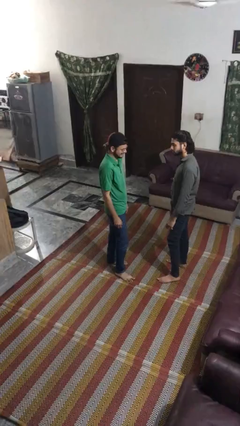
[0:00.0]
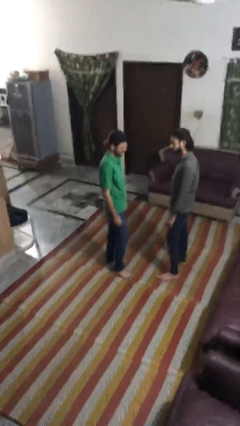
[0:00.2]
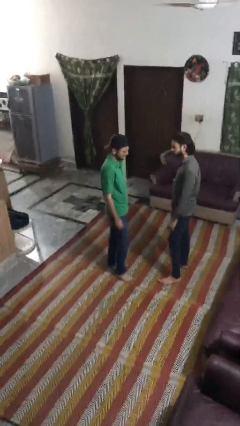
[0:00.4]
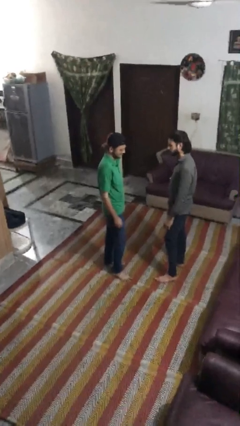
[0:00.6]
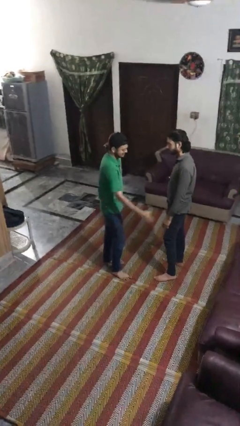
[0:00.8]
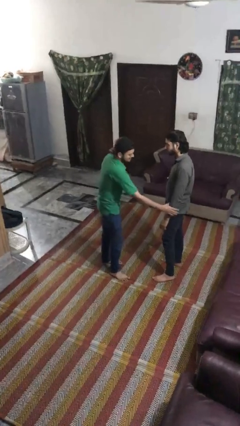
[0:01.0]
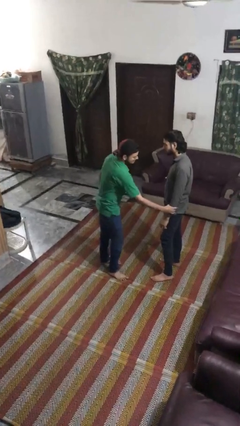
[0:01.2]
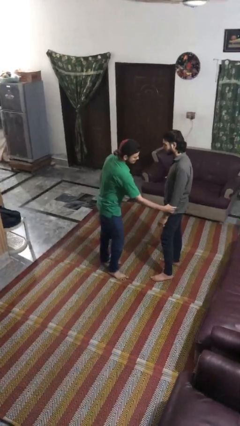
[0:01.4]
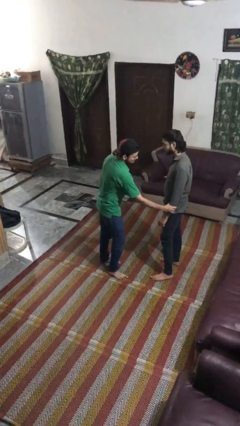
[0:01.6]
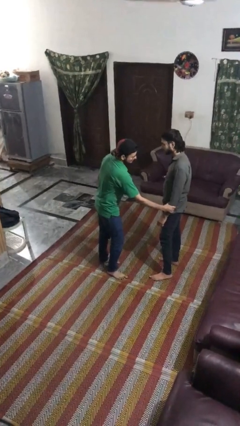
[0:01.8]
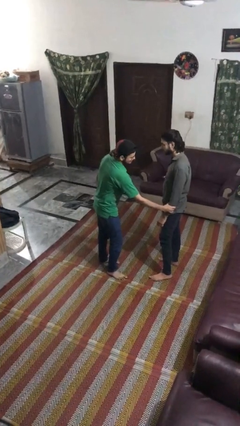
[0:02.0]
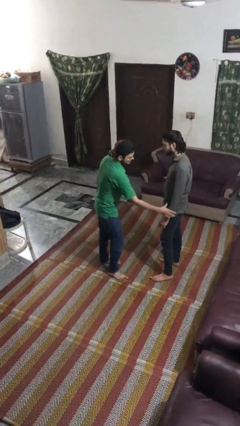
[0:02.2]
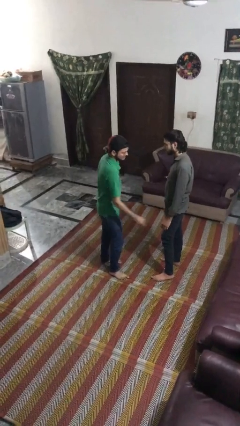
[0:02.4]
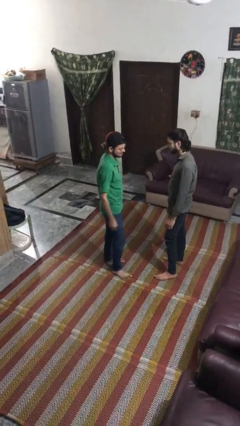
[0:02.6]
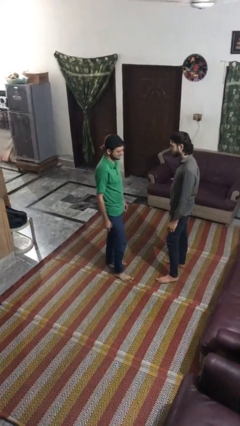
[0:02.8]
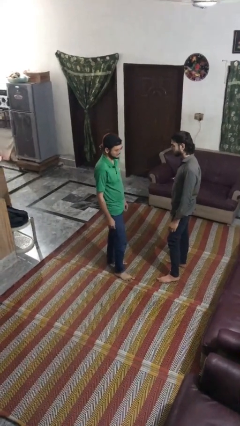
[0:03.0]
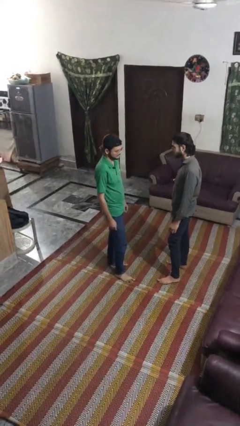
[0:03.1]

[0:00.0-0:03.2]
person grabs person by forearm

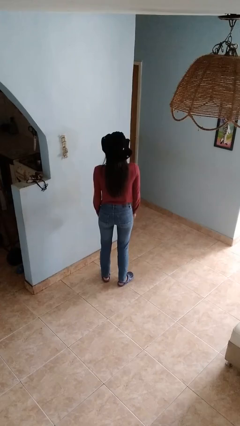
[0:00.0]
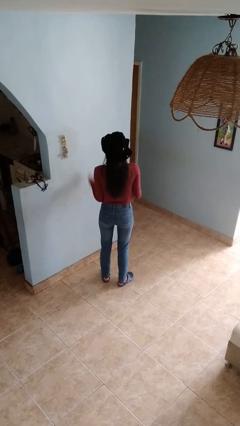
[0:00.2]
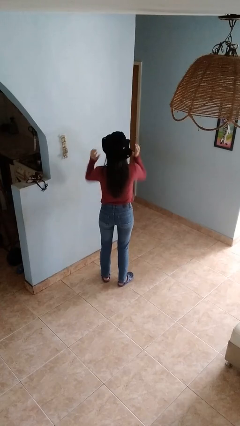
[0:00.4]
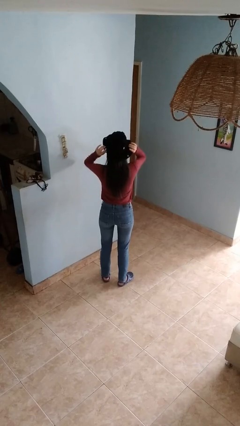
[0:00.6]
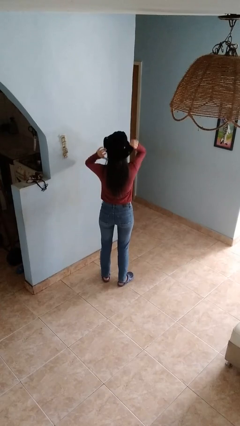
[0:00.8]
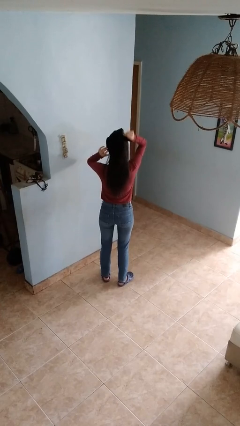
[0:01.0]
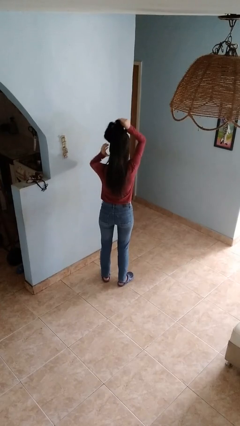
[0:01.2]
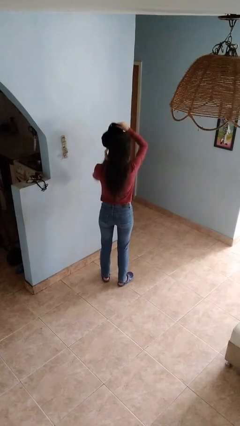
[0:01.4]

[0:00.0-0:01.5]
person takes off hat

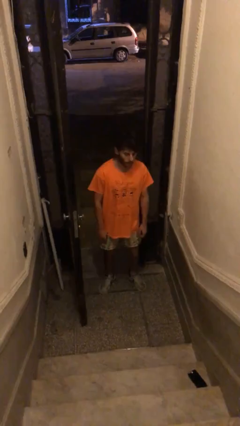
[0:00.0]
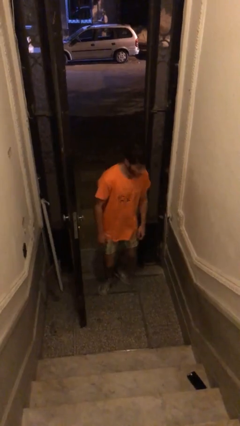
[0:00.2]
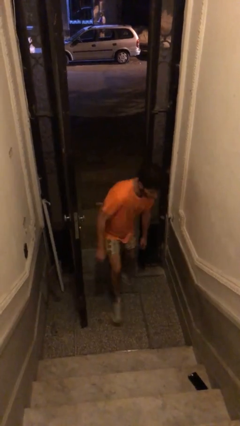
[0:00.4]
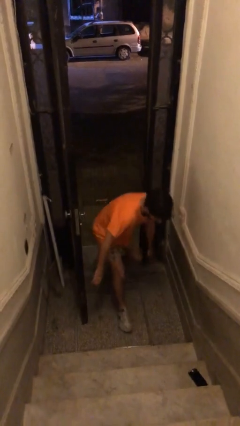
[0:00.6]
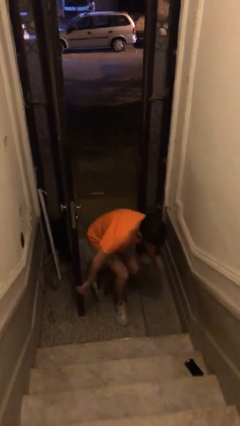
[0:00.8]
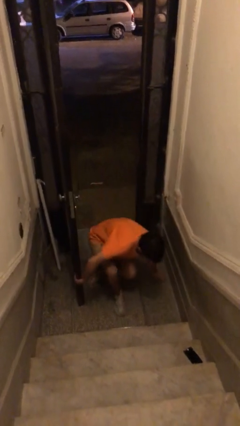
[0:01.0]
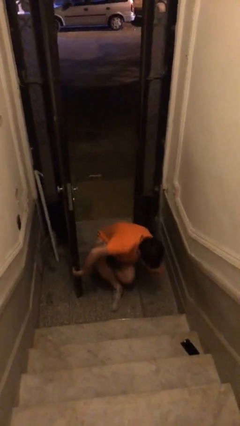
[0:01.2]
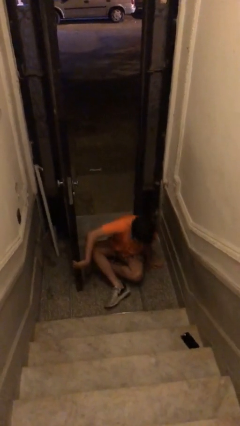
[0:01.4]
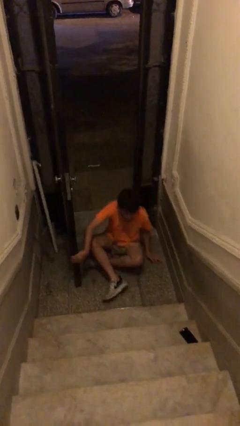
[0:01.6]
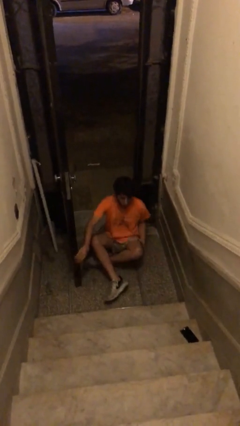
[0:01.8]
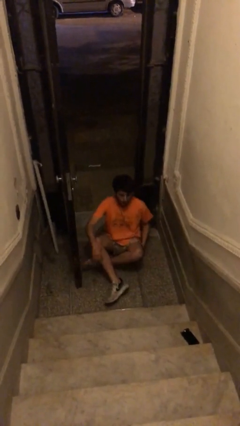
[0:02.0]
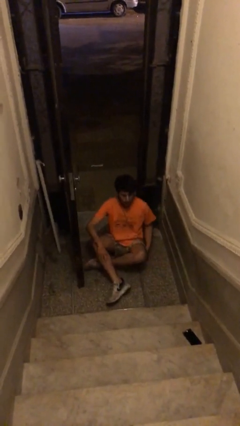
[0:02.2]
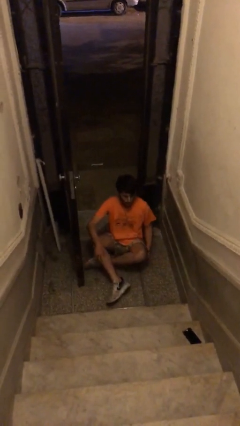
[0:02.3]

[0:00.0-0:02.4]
person sits down

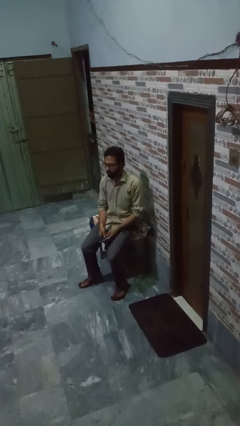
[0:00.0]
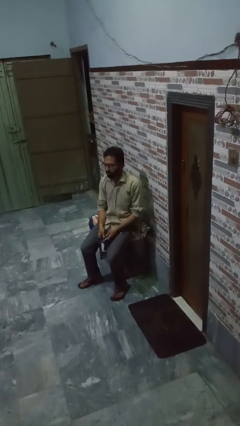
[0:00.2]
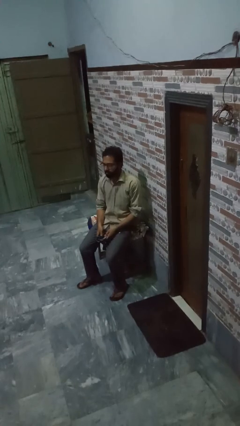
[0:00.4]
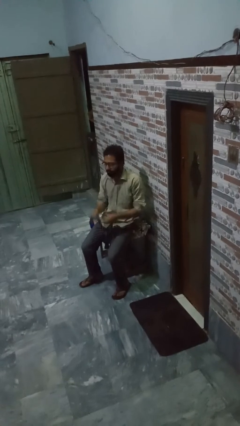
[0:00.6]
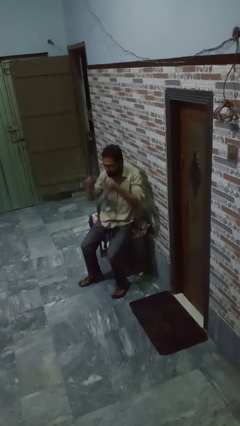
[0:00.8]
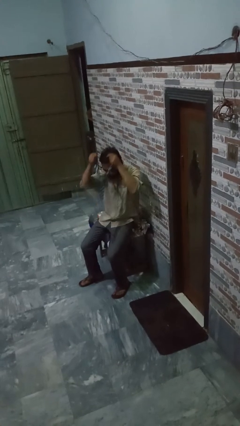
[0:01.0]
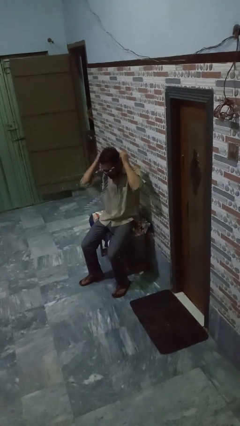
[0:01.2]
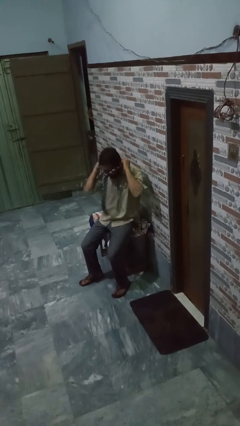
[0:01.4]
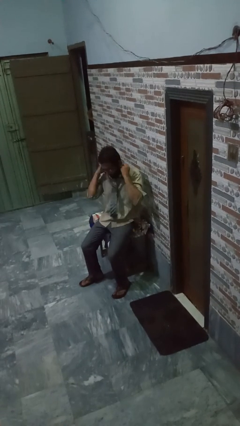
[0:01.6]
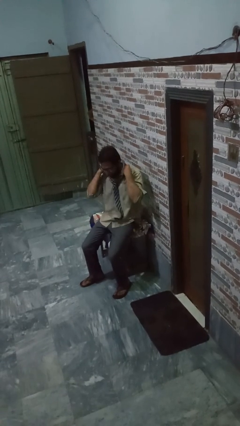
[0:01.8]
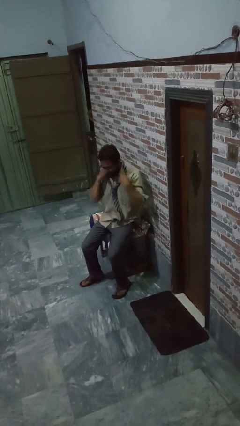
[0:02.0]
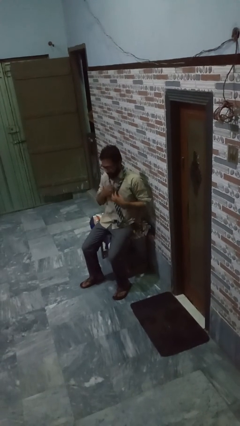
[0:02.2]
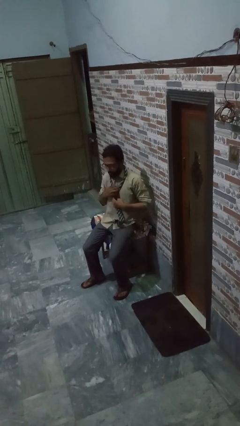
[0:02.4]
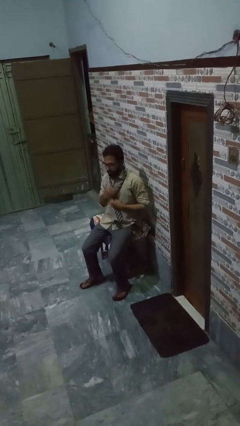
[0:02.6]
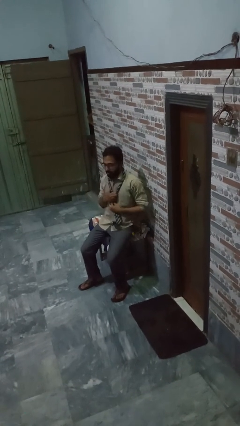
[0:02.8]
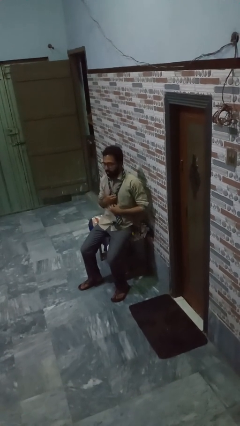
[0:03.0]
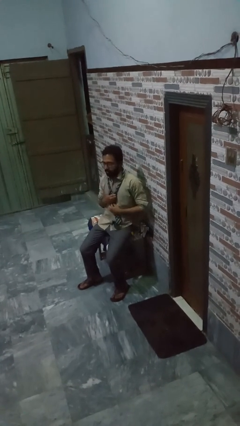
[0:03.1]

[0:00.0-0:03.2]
person puts on necktie

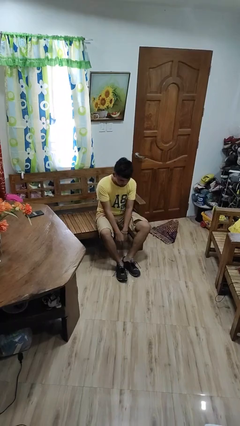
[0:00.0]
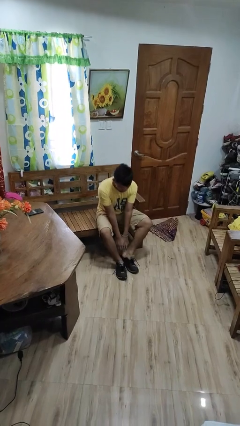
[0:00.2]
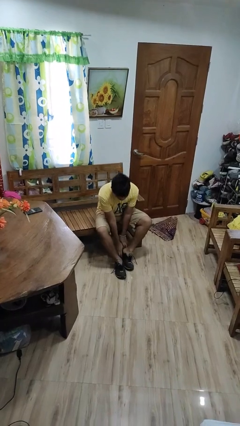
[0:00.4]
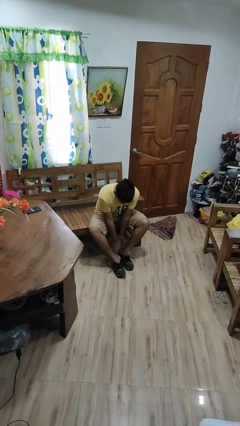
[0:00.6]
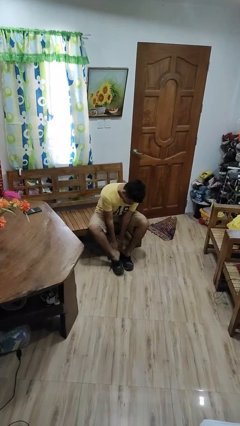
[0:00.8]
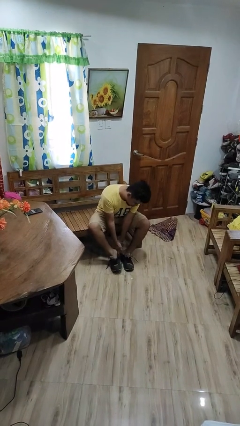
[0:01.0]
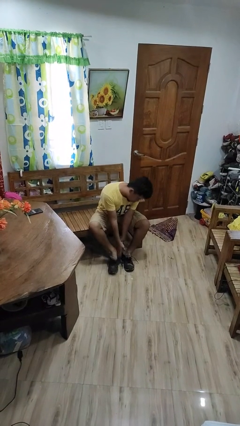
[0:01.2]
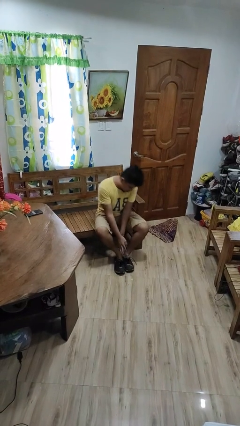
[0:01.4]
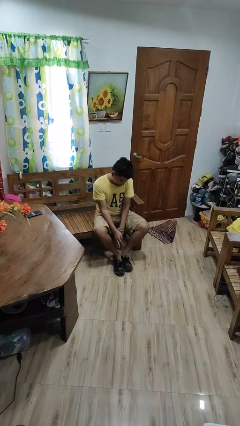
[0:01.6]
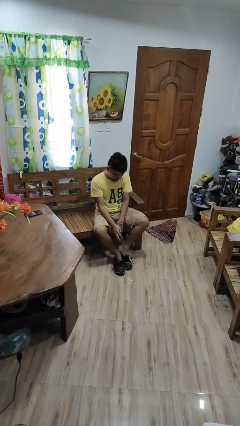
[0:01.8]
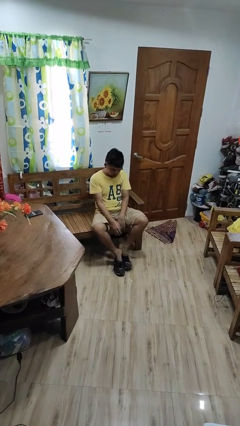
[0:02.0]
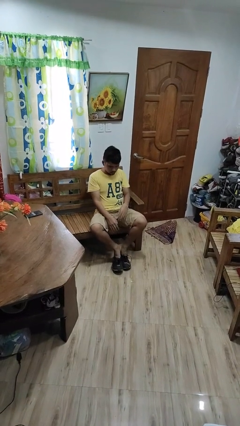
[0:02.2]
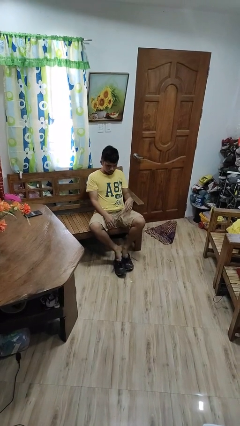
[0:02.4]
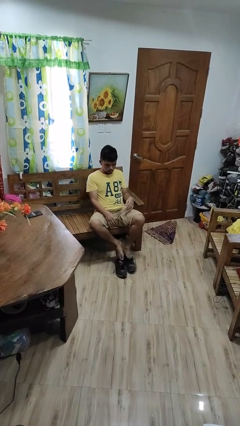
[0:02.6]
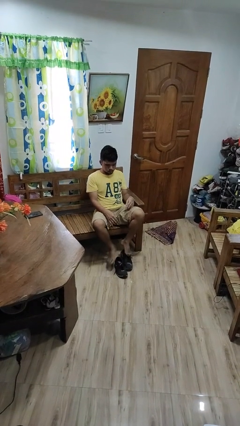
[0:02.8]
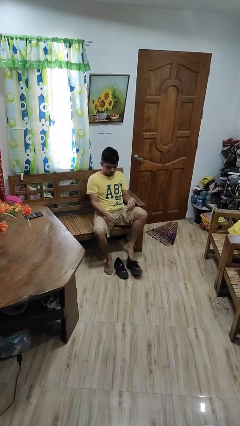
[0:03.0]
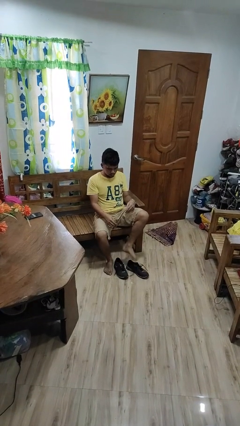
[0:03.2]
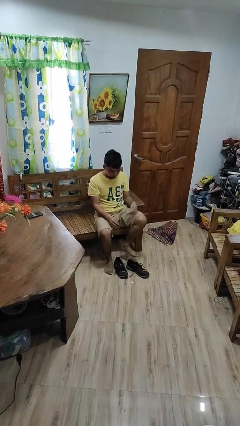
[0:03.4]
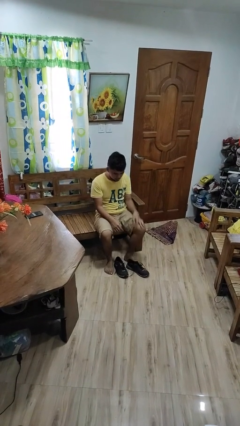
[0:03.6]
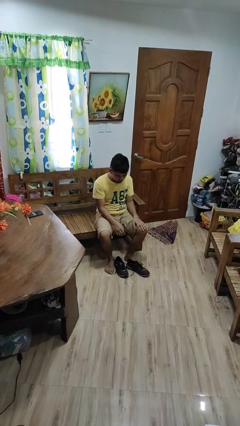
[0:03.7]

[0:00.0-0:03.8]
person takes off shoes

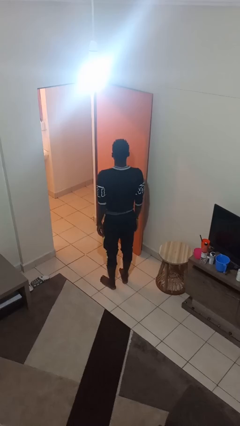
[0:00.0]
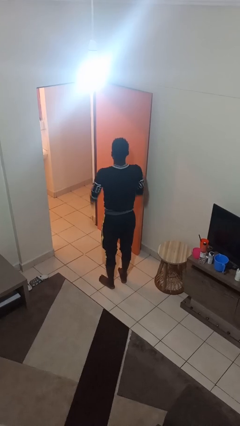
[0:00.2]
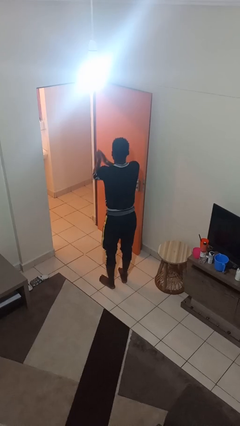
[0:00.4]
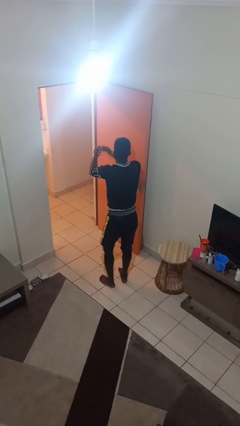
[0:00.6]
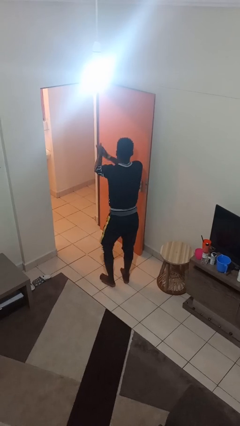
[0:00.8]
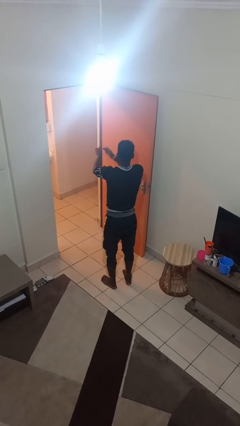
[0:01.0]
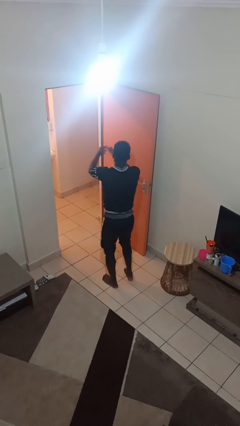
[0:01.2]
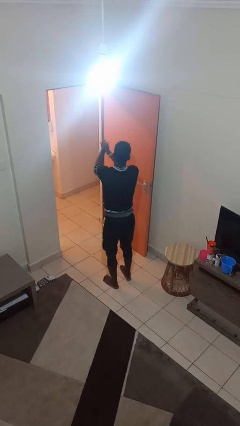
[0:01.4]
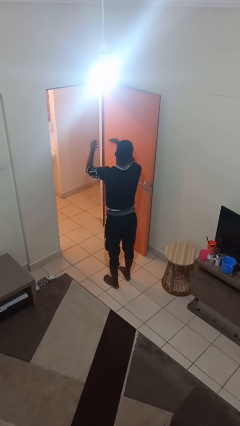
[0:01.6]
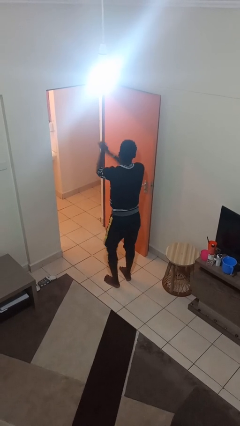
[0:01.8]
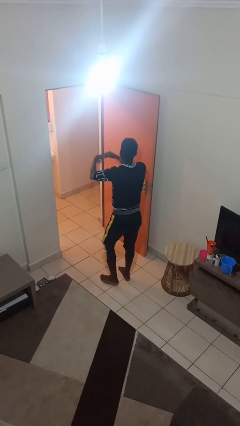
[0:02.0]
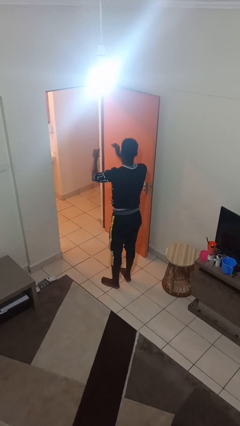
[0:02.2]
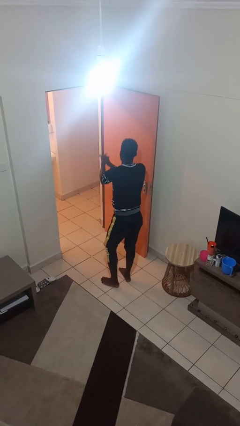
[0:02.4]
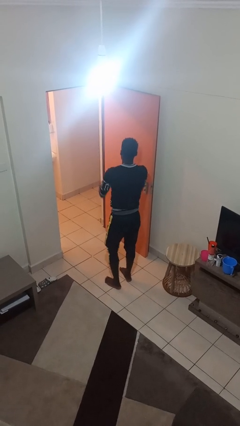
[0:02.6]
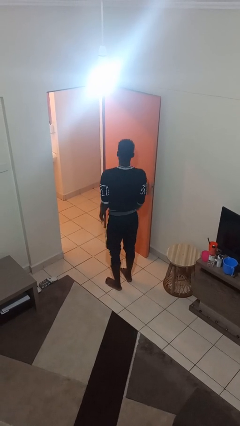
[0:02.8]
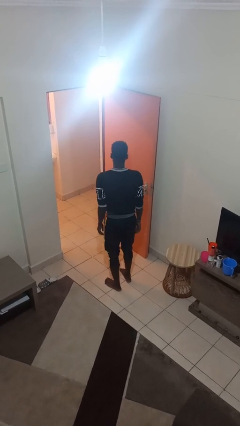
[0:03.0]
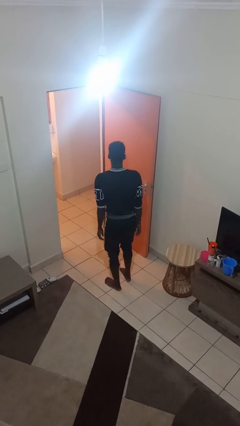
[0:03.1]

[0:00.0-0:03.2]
person claps hands

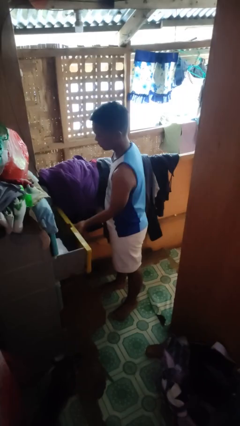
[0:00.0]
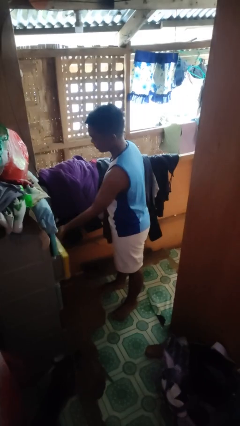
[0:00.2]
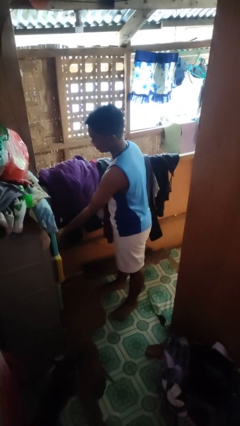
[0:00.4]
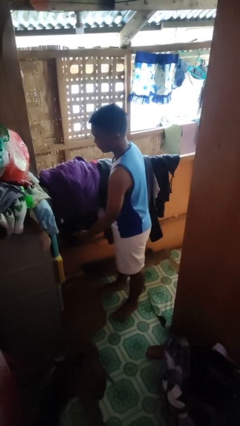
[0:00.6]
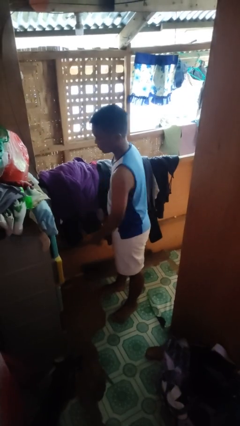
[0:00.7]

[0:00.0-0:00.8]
person closes dresser drawer
